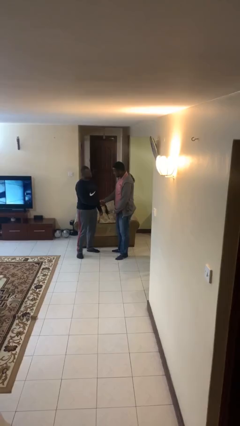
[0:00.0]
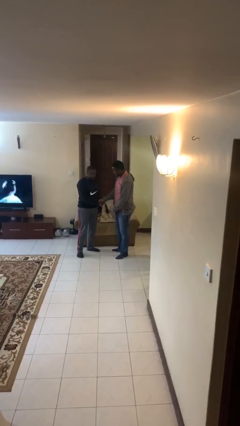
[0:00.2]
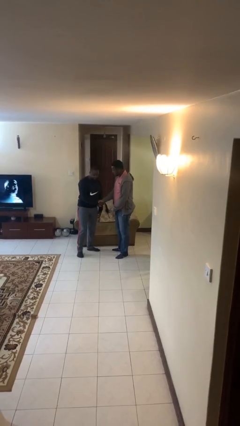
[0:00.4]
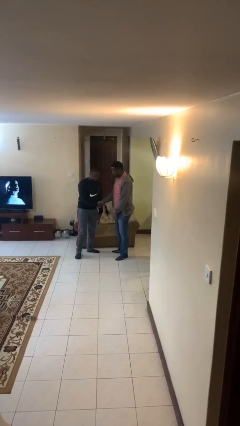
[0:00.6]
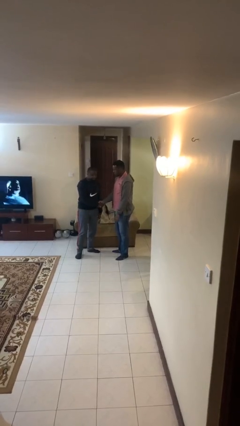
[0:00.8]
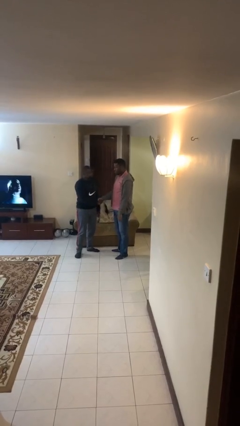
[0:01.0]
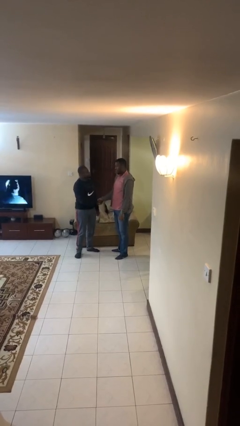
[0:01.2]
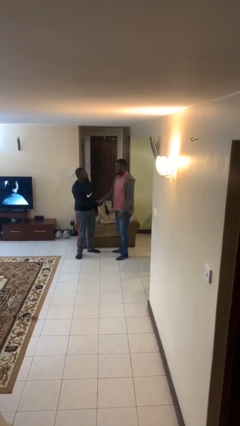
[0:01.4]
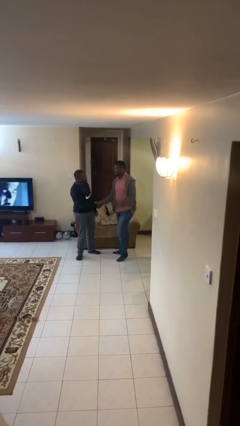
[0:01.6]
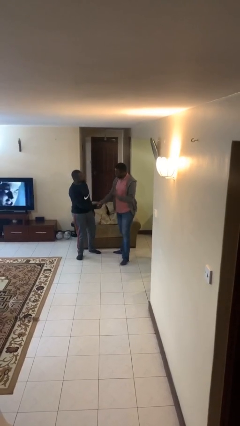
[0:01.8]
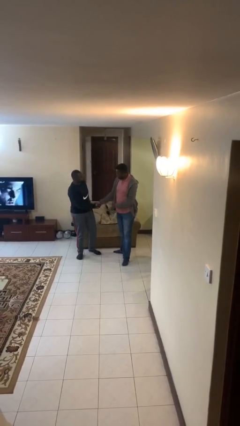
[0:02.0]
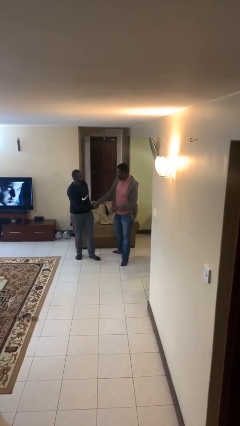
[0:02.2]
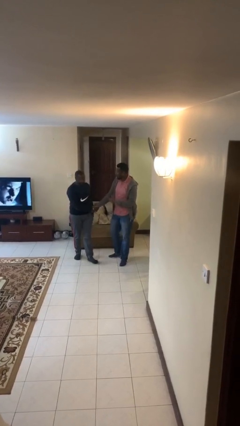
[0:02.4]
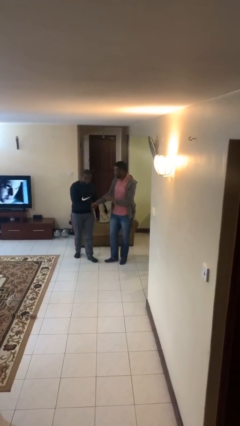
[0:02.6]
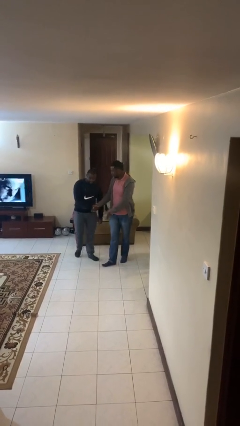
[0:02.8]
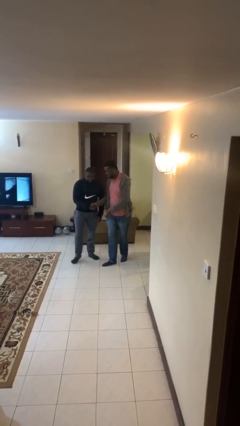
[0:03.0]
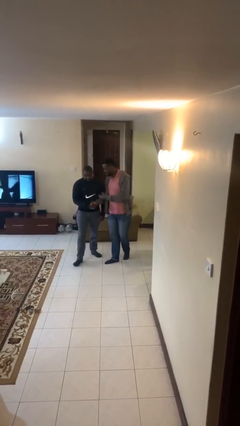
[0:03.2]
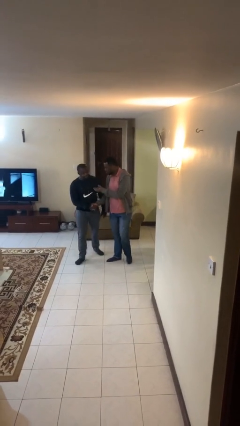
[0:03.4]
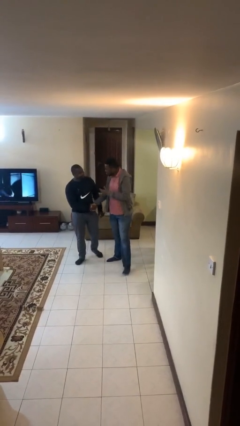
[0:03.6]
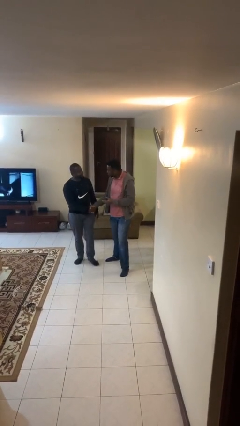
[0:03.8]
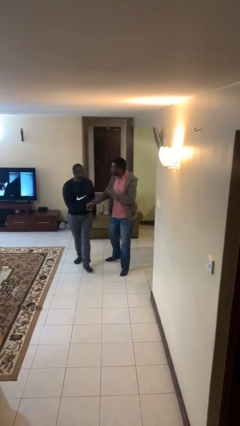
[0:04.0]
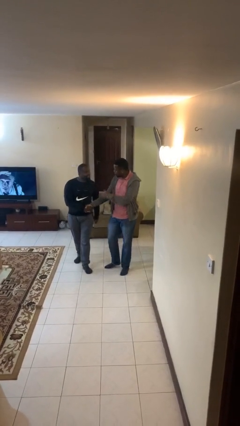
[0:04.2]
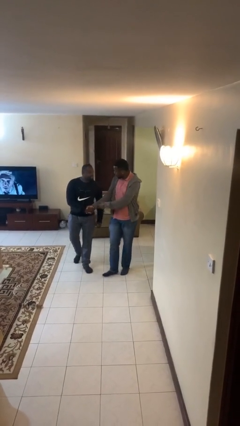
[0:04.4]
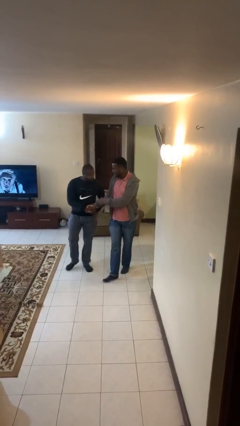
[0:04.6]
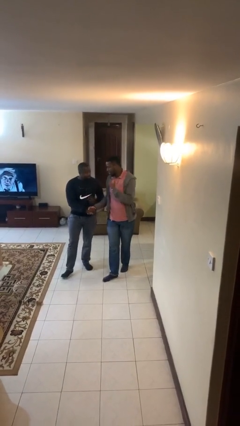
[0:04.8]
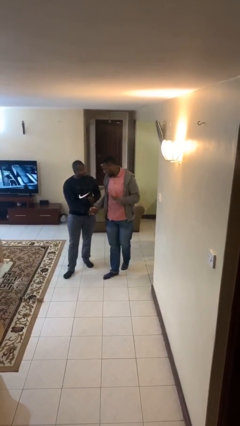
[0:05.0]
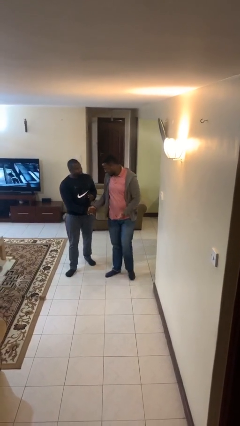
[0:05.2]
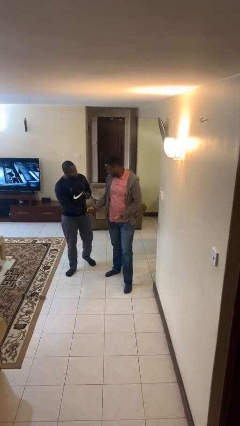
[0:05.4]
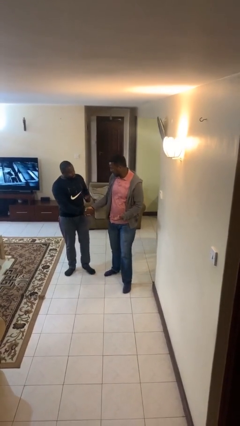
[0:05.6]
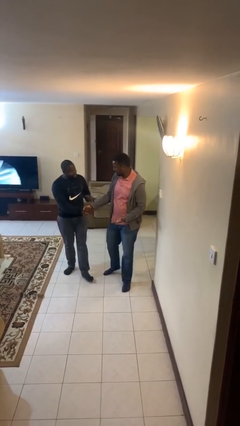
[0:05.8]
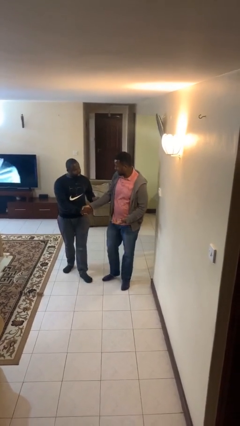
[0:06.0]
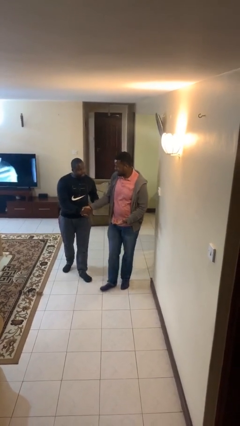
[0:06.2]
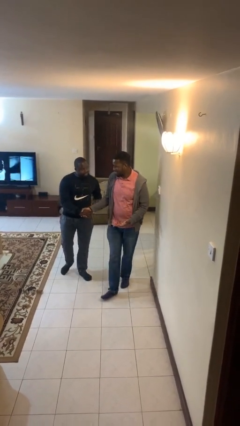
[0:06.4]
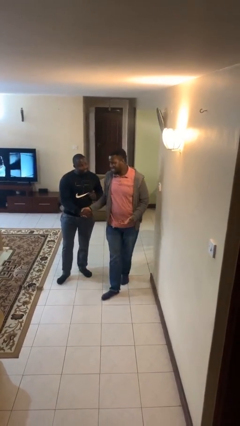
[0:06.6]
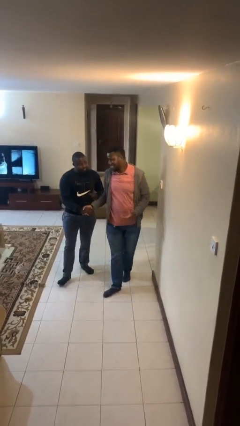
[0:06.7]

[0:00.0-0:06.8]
person holds hand

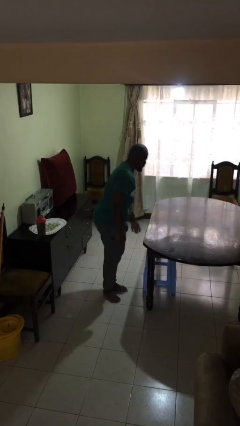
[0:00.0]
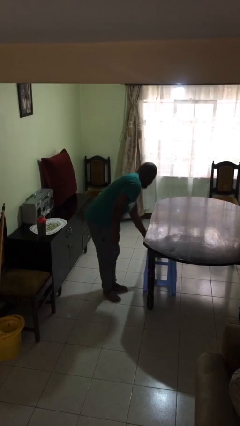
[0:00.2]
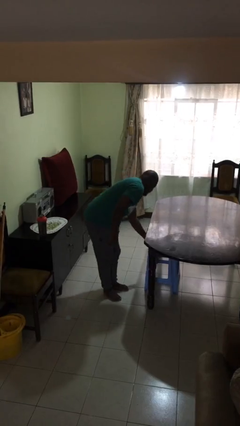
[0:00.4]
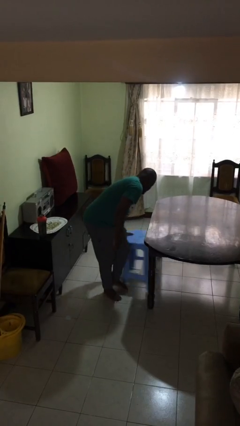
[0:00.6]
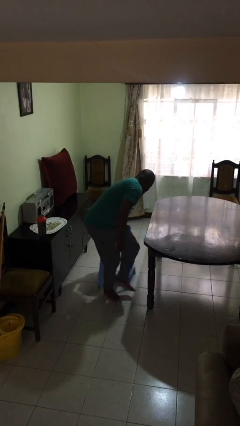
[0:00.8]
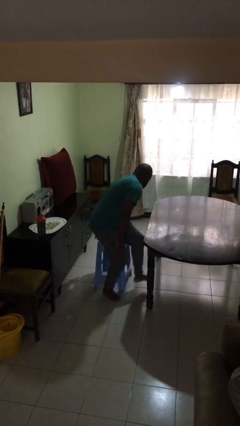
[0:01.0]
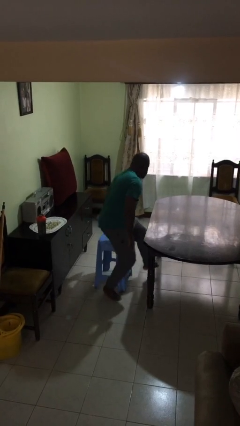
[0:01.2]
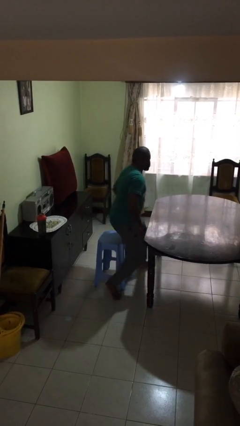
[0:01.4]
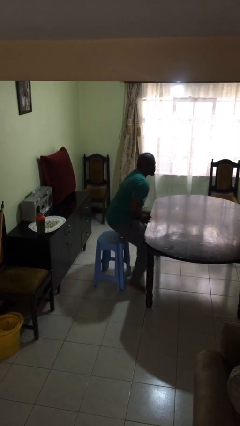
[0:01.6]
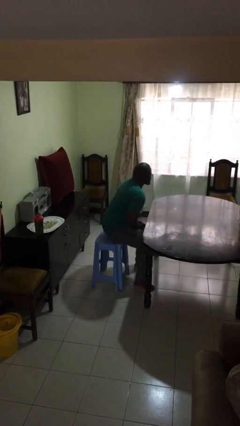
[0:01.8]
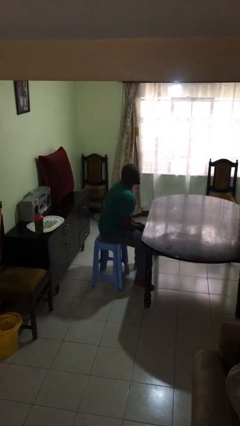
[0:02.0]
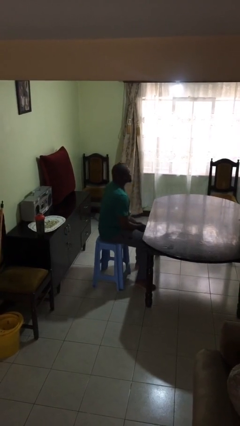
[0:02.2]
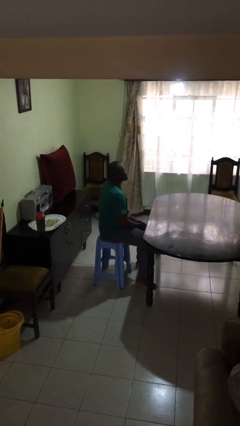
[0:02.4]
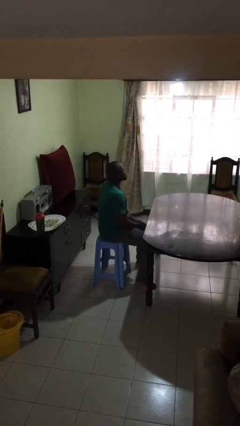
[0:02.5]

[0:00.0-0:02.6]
person sits down

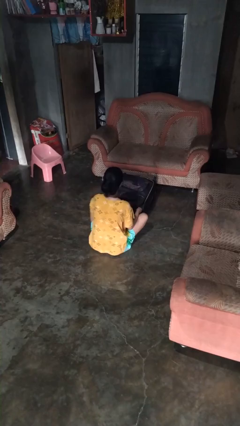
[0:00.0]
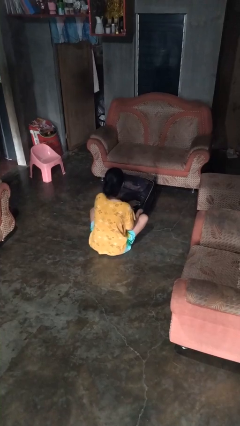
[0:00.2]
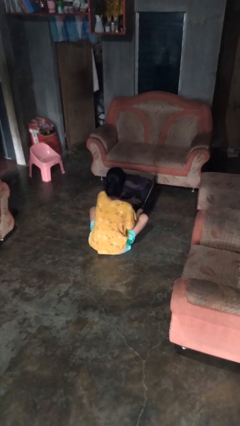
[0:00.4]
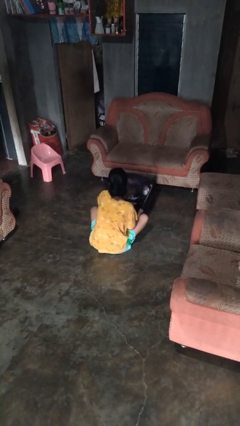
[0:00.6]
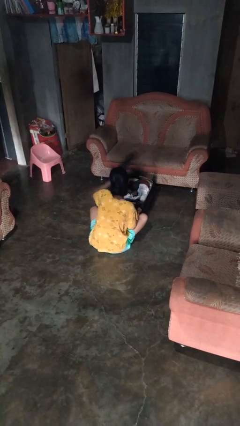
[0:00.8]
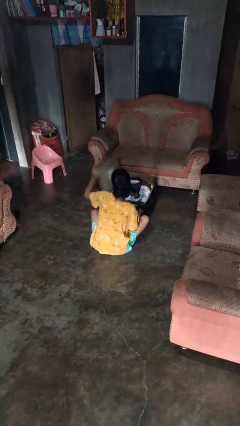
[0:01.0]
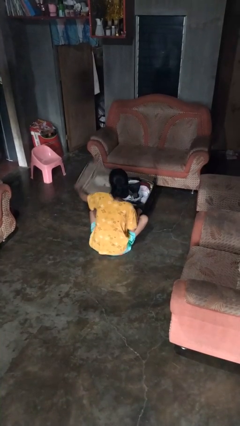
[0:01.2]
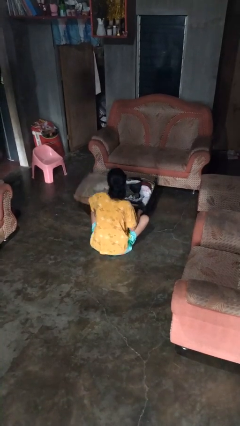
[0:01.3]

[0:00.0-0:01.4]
person opens suitcase

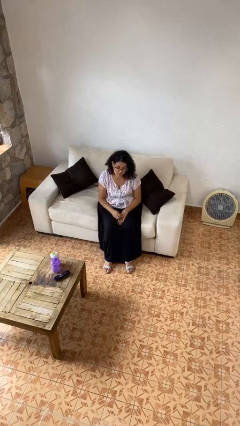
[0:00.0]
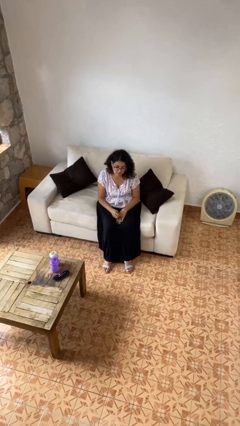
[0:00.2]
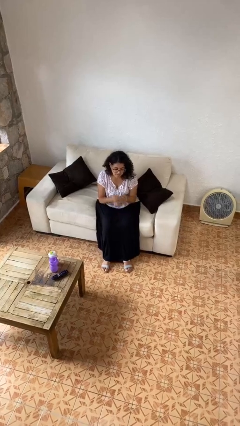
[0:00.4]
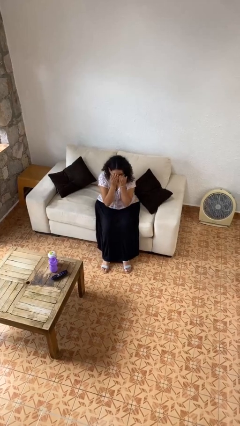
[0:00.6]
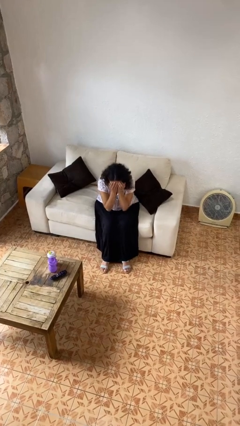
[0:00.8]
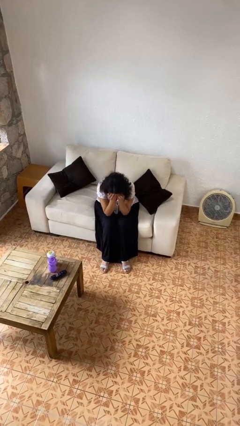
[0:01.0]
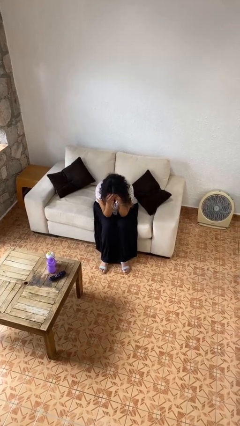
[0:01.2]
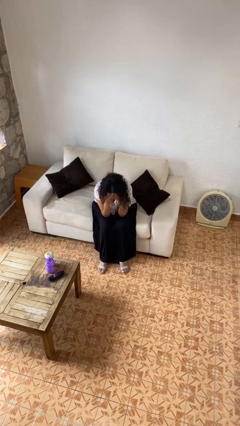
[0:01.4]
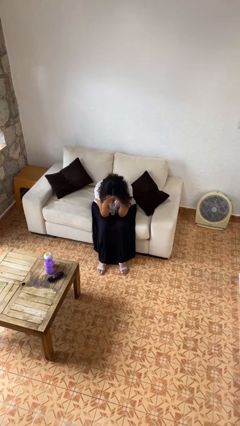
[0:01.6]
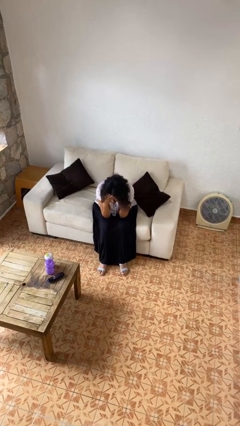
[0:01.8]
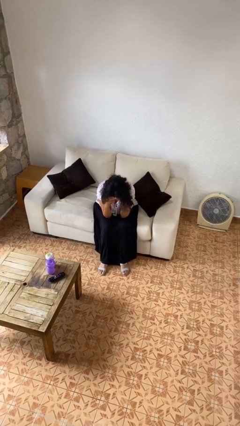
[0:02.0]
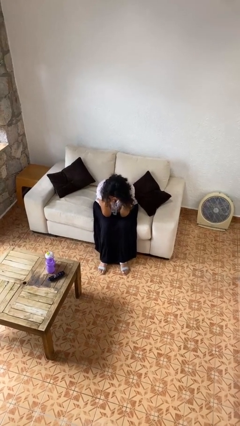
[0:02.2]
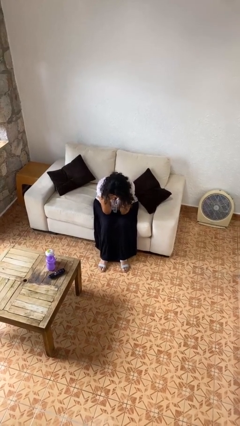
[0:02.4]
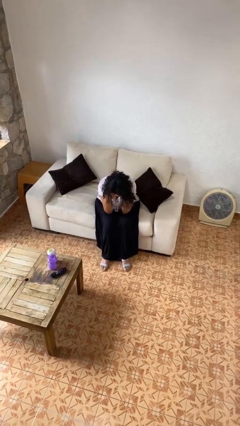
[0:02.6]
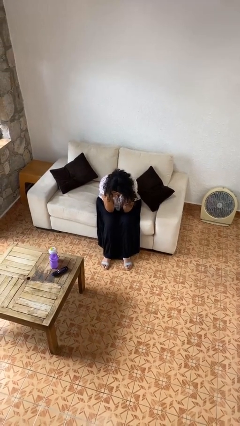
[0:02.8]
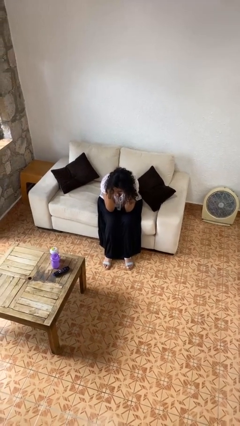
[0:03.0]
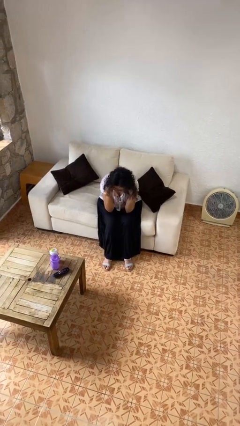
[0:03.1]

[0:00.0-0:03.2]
person covers face with hands

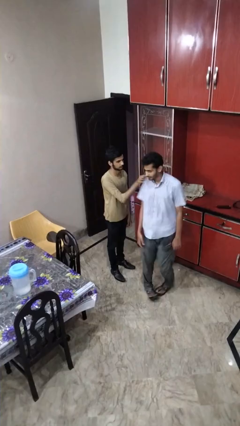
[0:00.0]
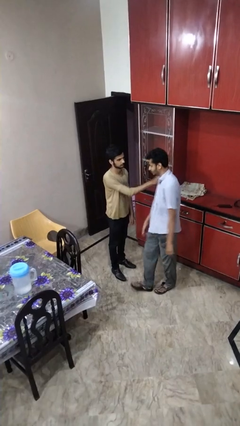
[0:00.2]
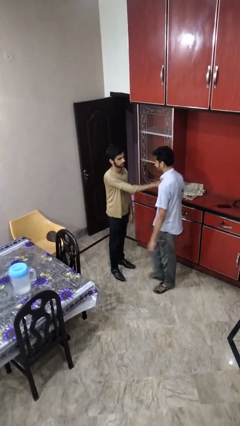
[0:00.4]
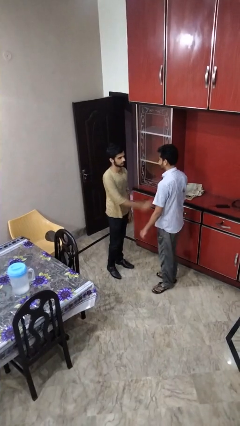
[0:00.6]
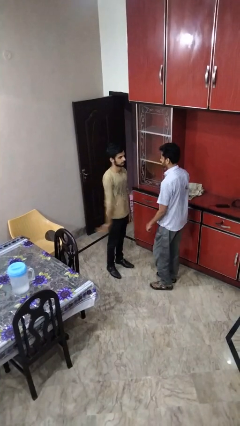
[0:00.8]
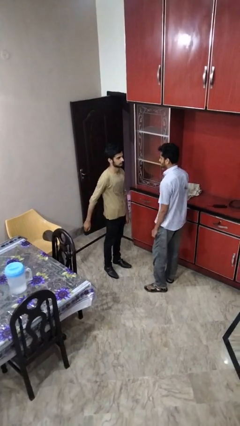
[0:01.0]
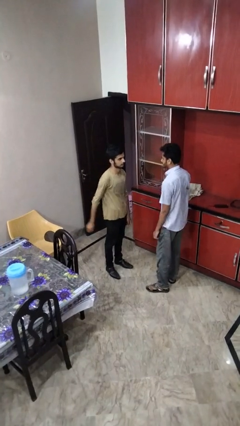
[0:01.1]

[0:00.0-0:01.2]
person spins person around

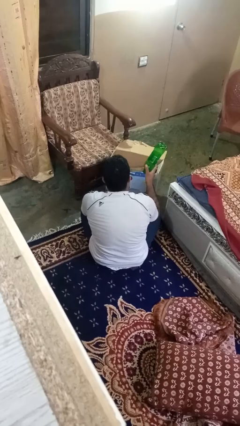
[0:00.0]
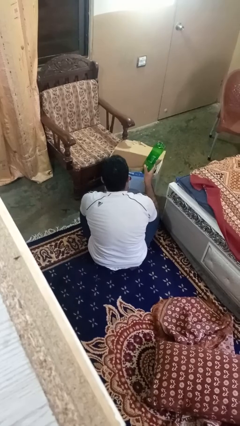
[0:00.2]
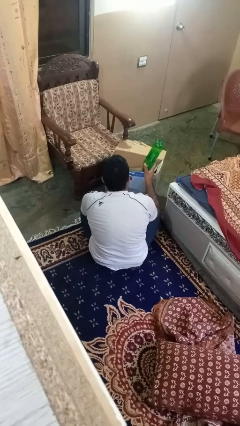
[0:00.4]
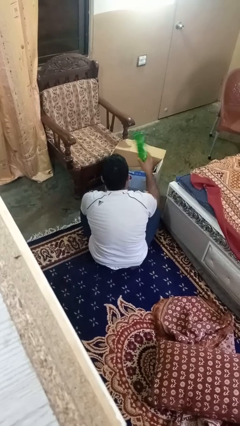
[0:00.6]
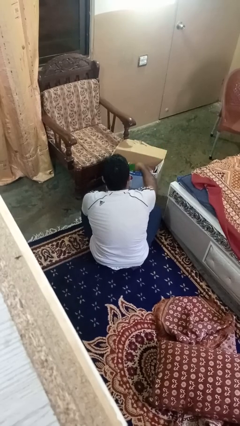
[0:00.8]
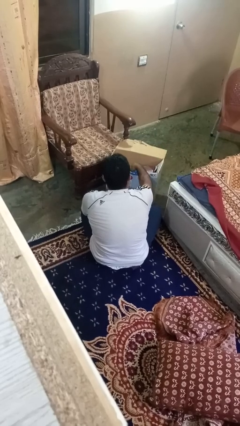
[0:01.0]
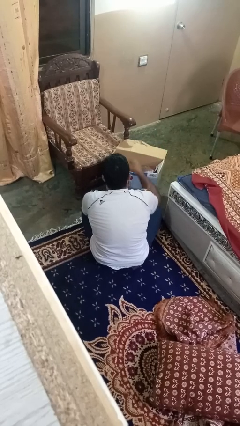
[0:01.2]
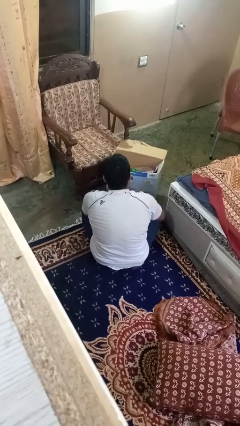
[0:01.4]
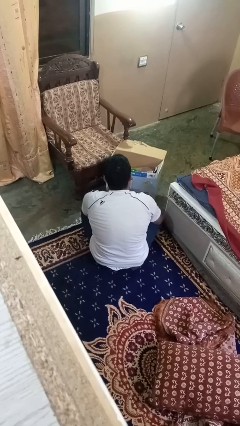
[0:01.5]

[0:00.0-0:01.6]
person puts object into box

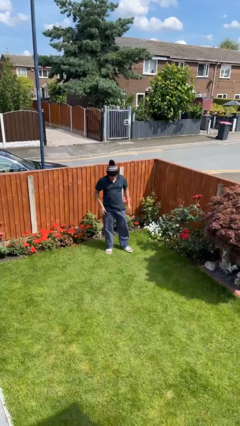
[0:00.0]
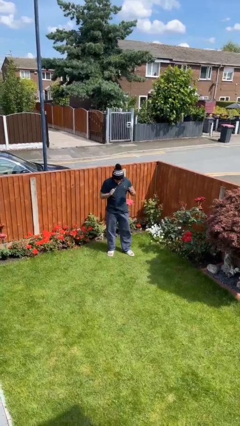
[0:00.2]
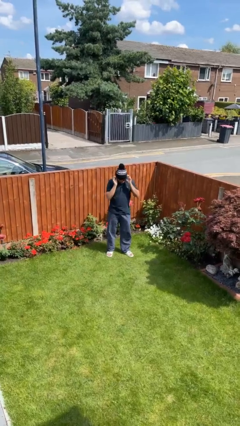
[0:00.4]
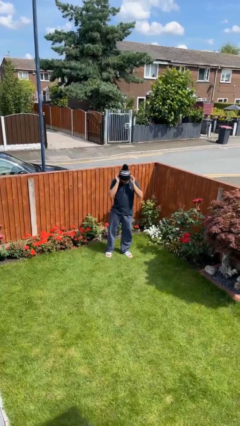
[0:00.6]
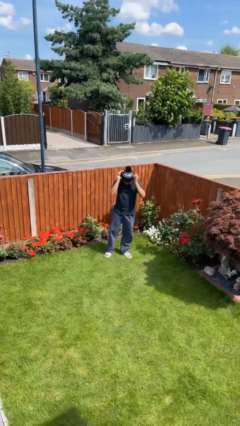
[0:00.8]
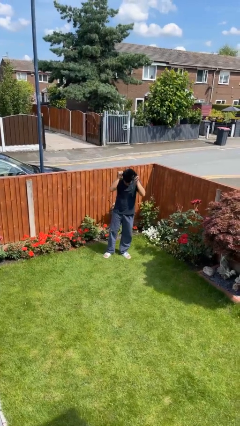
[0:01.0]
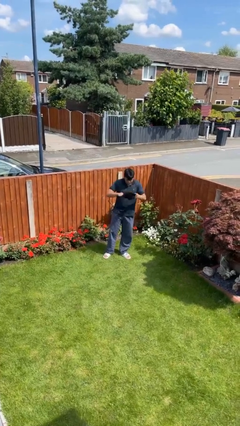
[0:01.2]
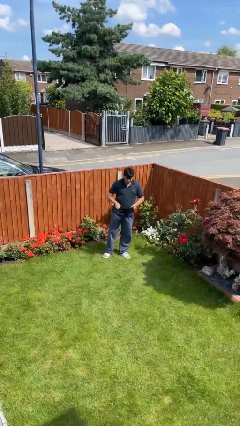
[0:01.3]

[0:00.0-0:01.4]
person takes off hat
